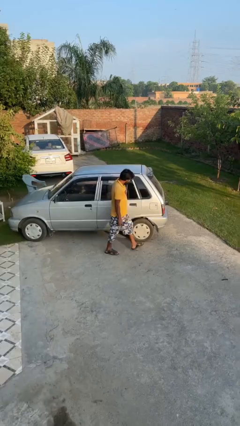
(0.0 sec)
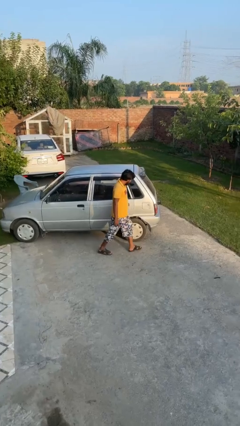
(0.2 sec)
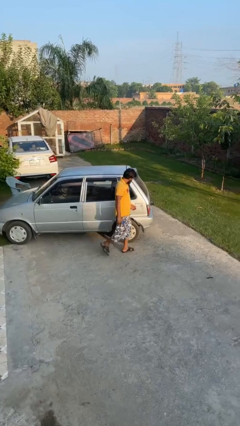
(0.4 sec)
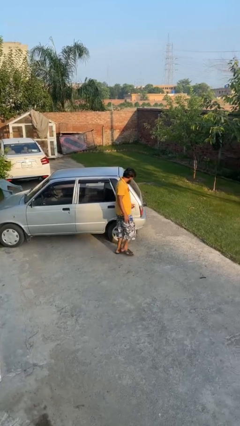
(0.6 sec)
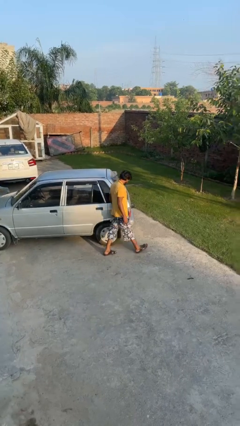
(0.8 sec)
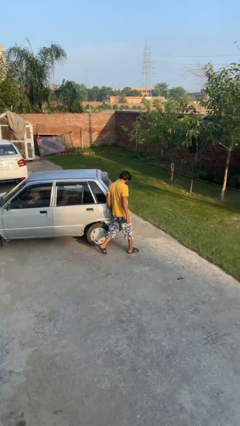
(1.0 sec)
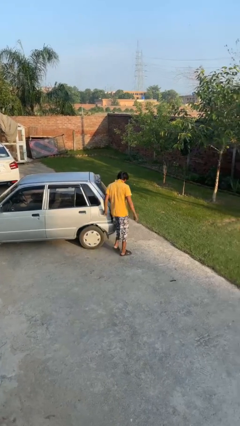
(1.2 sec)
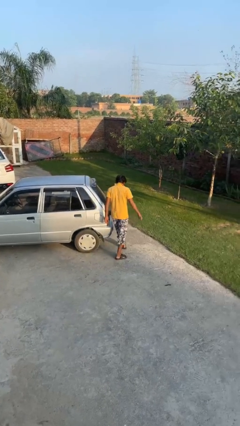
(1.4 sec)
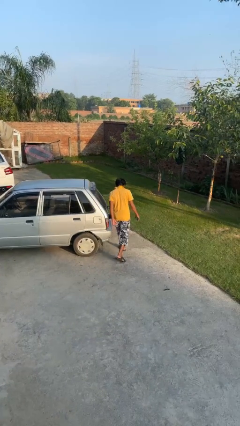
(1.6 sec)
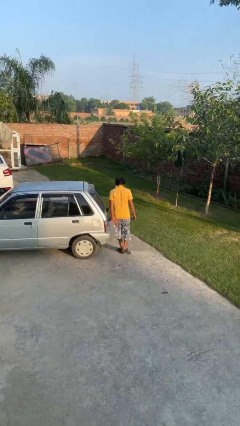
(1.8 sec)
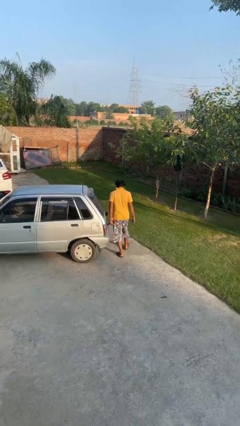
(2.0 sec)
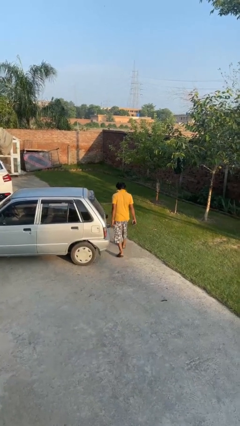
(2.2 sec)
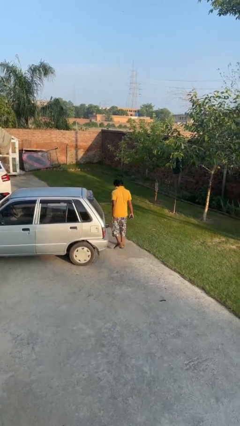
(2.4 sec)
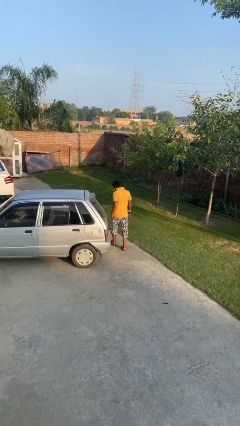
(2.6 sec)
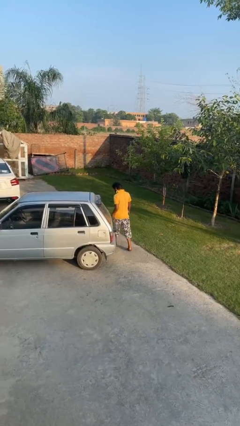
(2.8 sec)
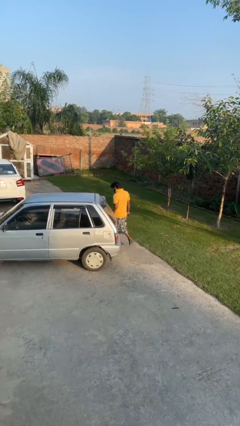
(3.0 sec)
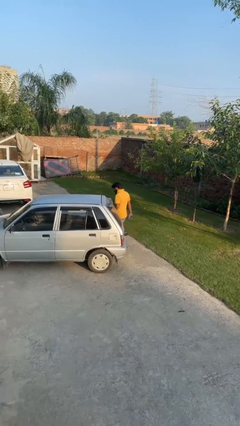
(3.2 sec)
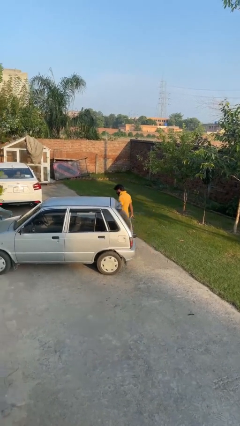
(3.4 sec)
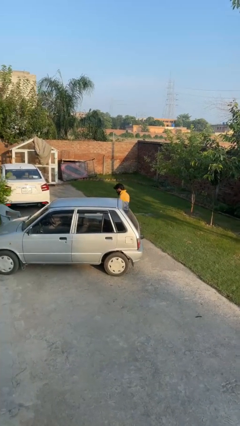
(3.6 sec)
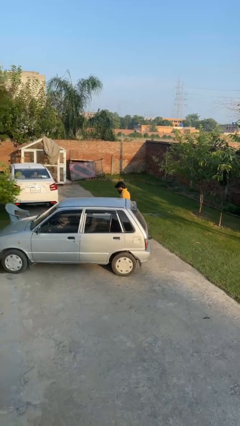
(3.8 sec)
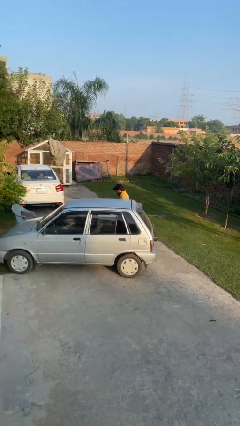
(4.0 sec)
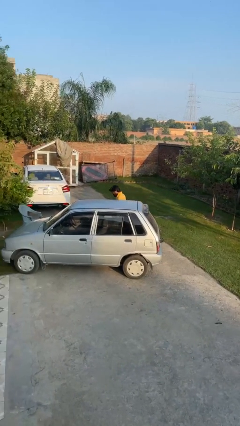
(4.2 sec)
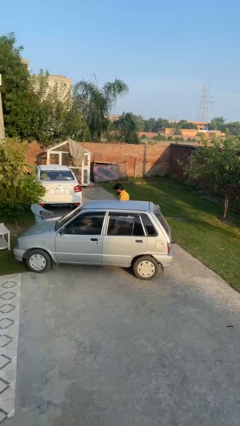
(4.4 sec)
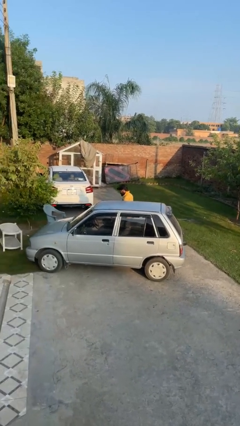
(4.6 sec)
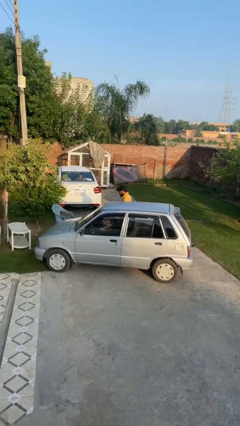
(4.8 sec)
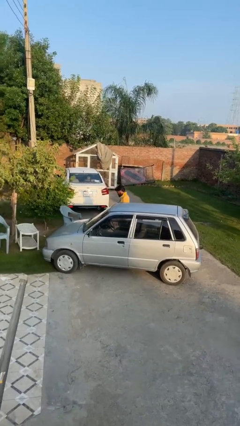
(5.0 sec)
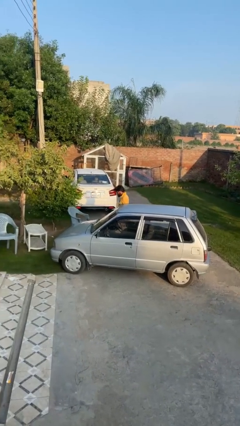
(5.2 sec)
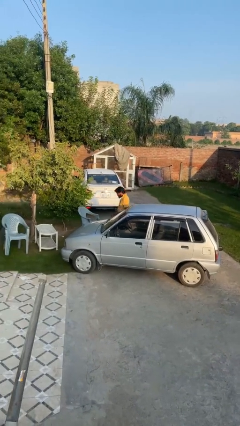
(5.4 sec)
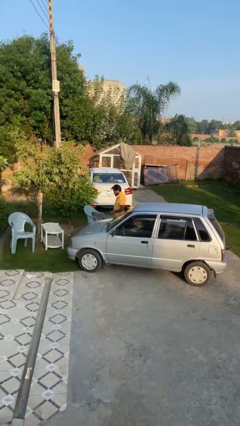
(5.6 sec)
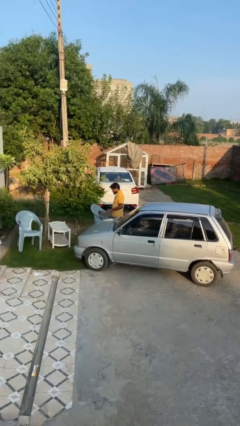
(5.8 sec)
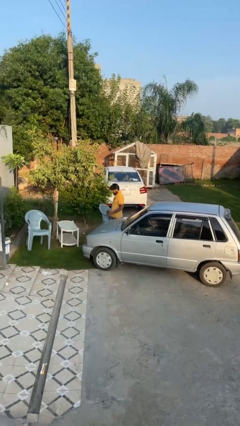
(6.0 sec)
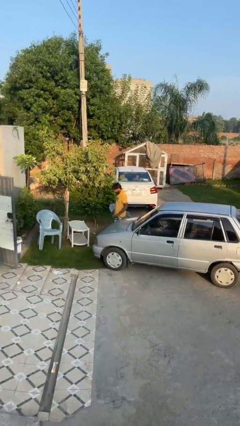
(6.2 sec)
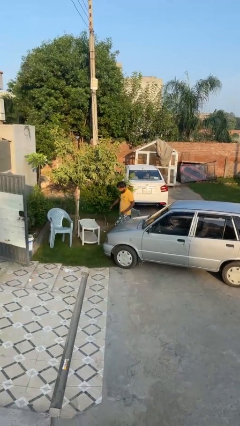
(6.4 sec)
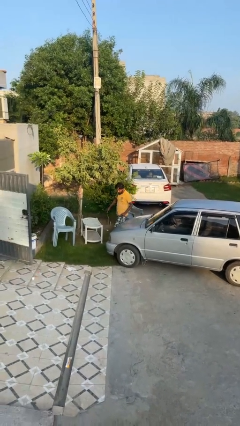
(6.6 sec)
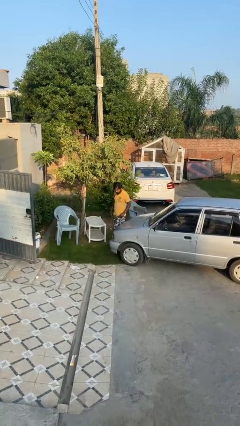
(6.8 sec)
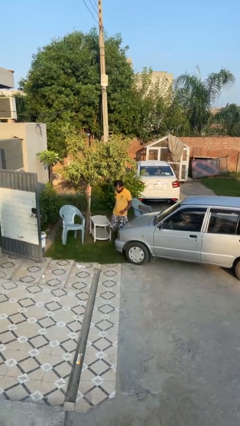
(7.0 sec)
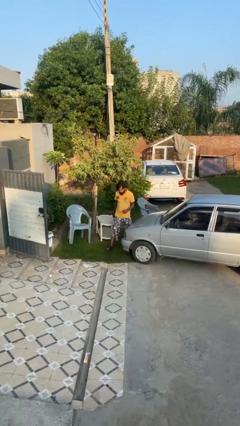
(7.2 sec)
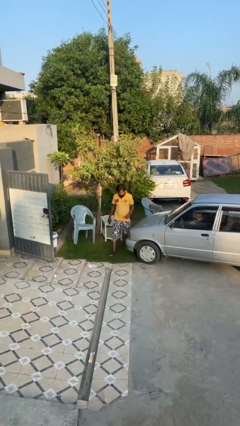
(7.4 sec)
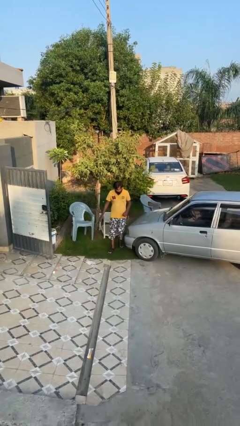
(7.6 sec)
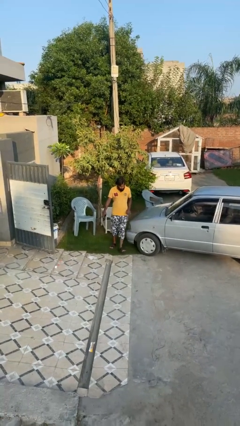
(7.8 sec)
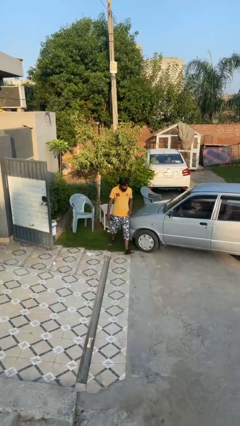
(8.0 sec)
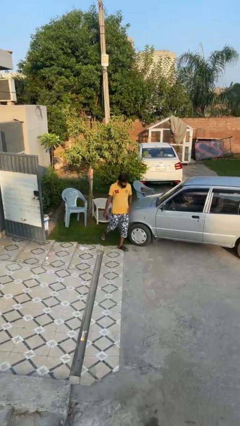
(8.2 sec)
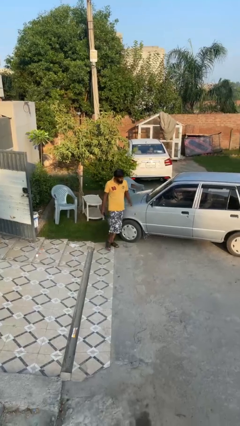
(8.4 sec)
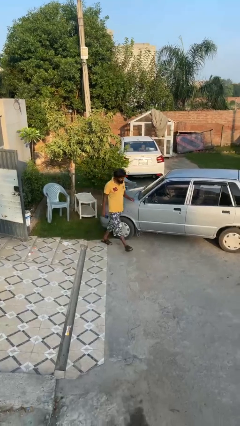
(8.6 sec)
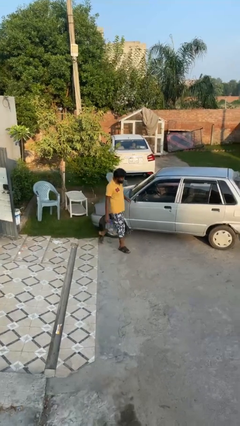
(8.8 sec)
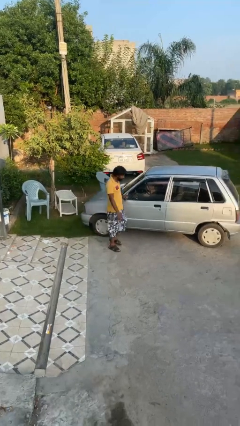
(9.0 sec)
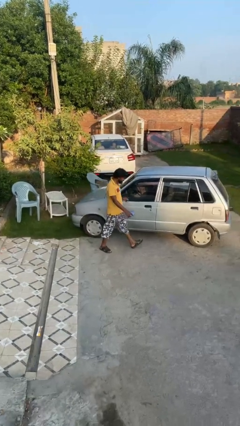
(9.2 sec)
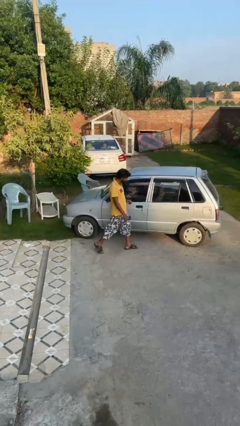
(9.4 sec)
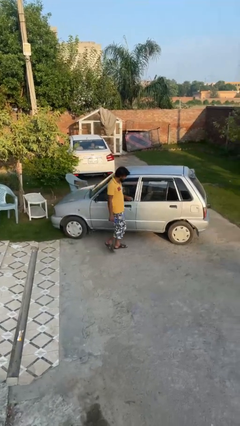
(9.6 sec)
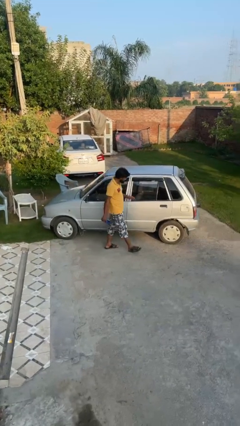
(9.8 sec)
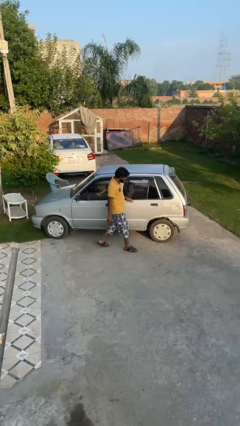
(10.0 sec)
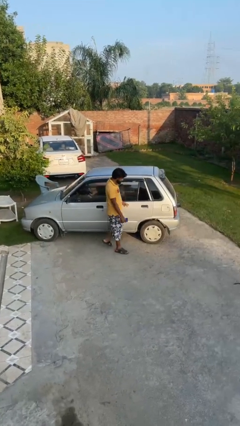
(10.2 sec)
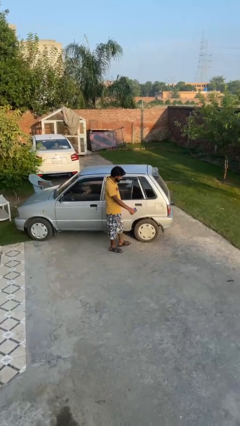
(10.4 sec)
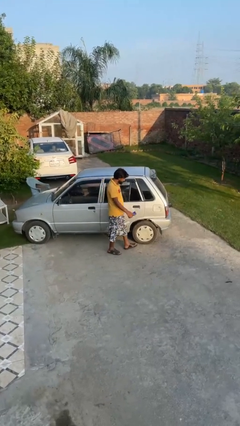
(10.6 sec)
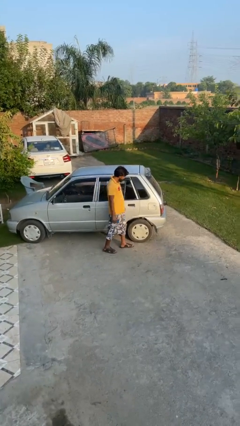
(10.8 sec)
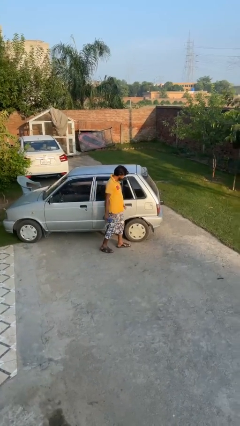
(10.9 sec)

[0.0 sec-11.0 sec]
person walks around car

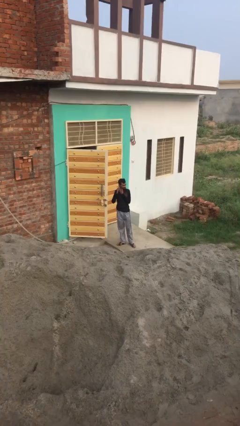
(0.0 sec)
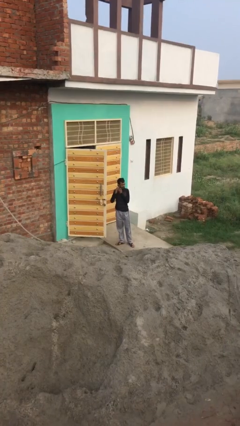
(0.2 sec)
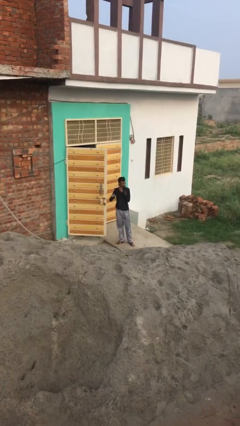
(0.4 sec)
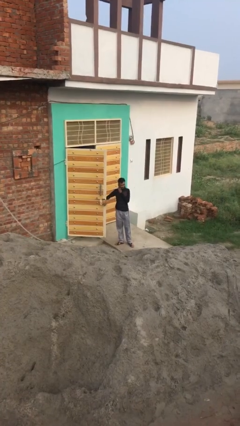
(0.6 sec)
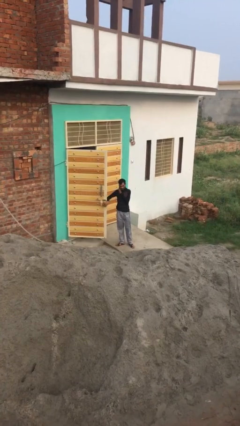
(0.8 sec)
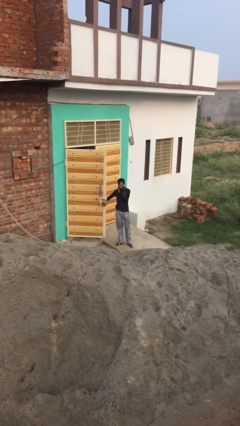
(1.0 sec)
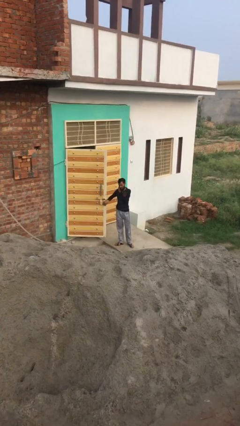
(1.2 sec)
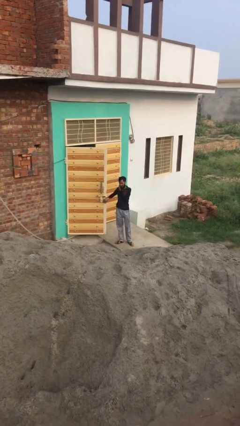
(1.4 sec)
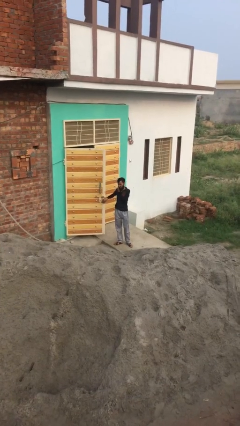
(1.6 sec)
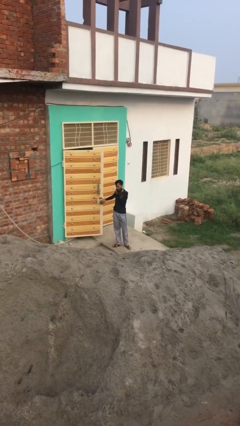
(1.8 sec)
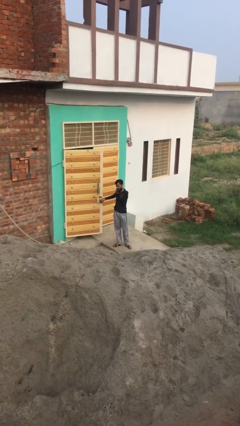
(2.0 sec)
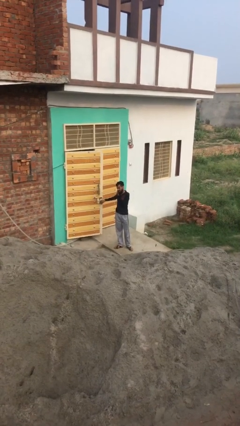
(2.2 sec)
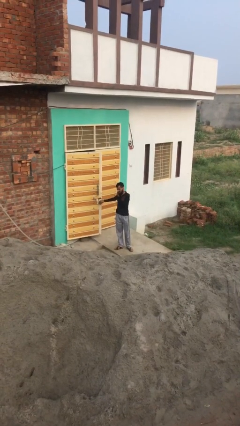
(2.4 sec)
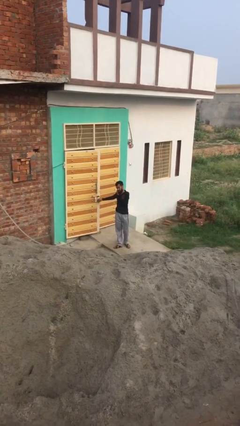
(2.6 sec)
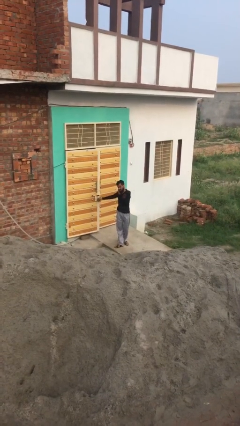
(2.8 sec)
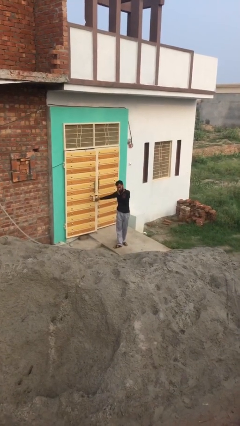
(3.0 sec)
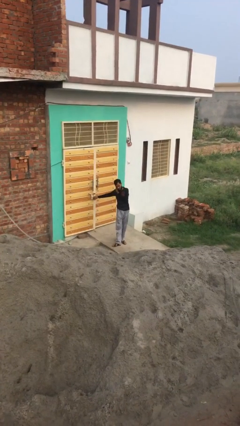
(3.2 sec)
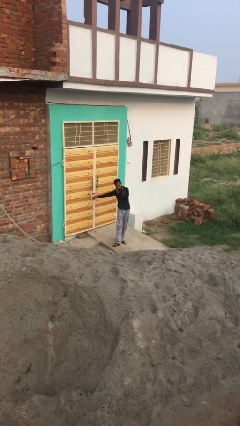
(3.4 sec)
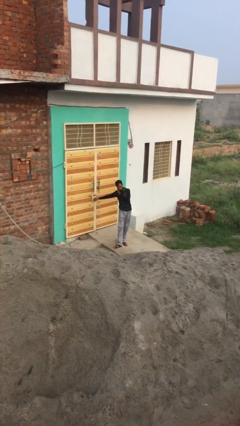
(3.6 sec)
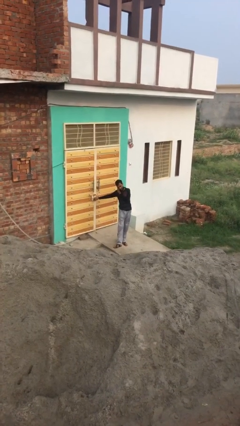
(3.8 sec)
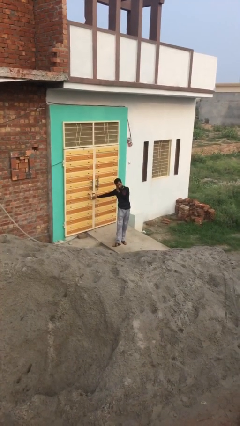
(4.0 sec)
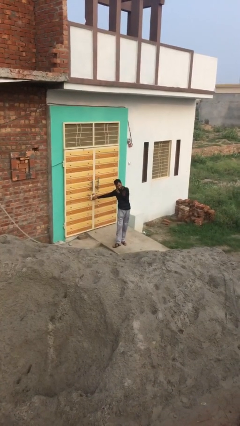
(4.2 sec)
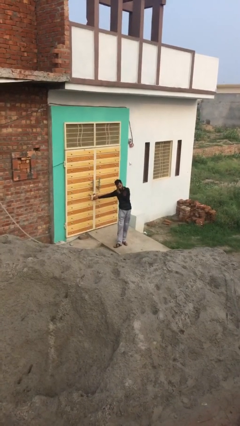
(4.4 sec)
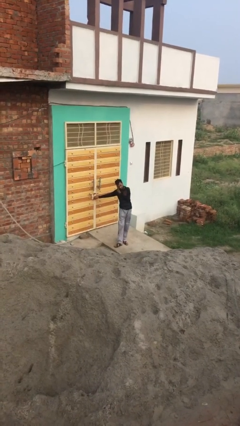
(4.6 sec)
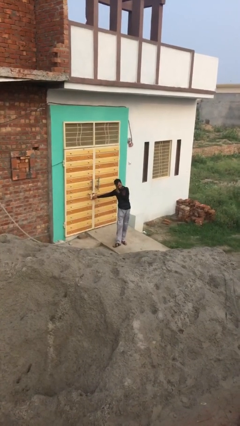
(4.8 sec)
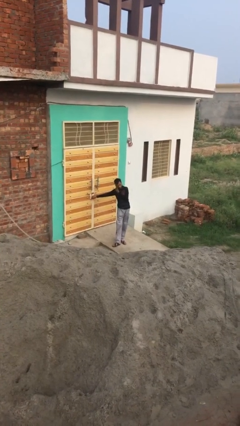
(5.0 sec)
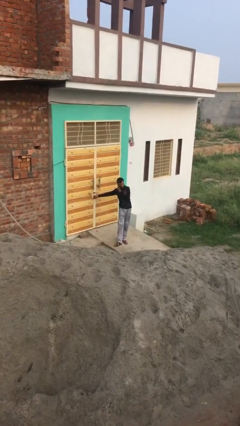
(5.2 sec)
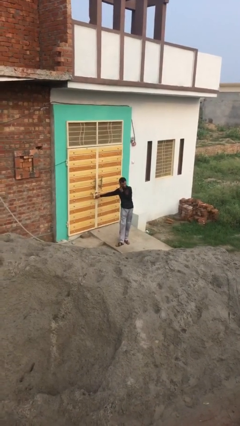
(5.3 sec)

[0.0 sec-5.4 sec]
person closes facility door

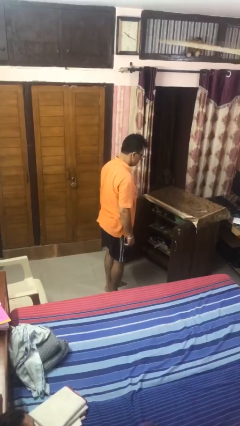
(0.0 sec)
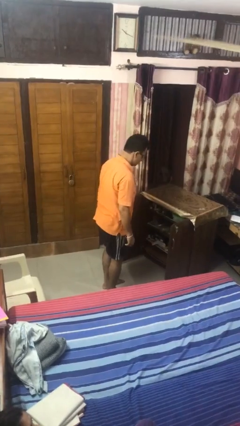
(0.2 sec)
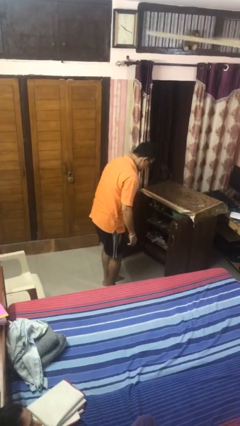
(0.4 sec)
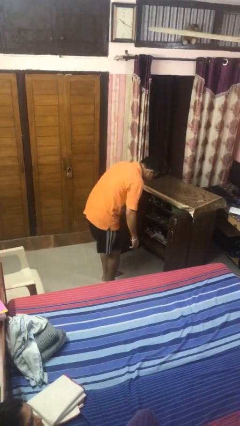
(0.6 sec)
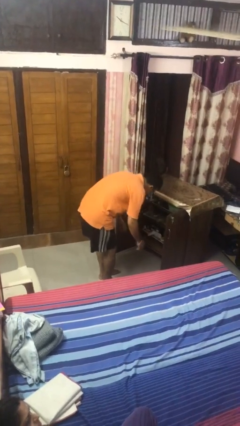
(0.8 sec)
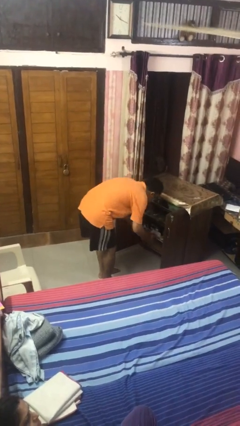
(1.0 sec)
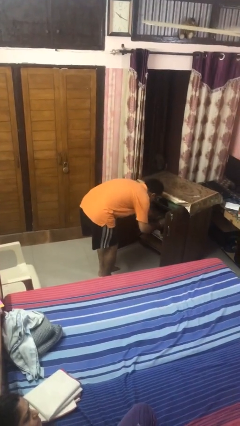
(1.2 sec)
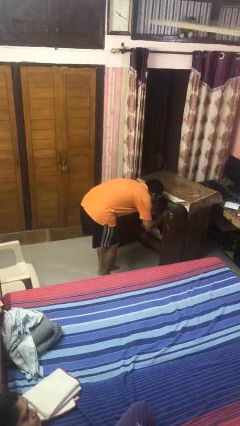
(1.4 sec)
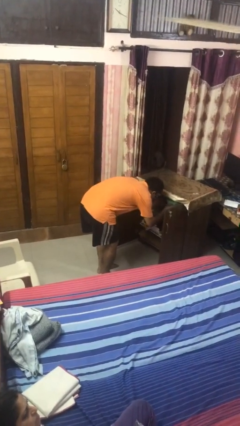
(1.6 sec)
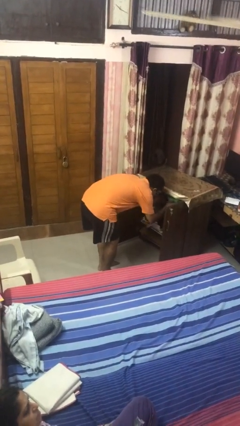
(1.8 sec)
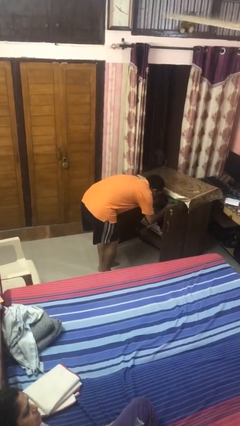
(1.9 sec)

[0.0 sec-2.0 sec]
person searches in cabinet
